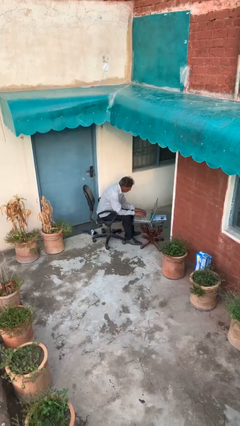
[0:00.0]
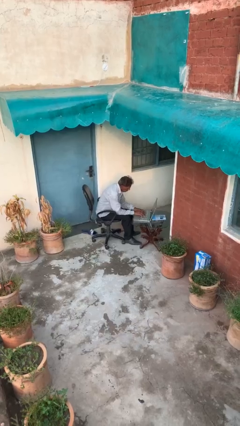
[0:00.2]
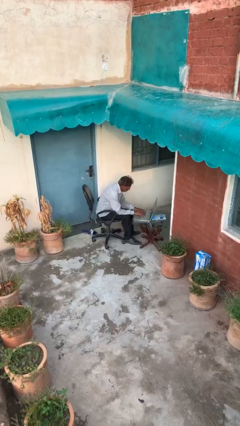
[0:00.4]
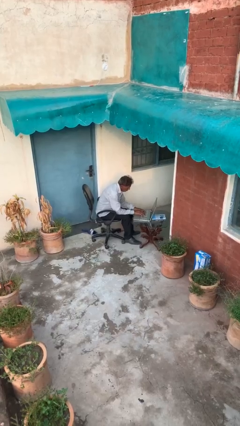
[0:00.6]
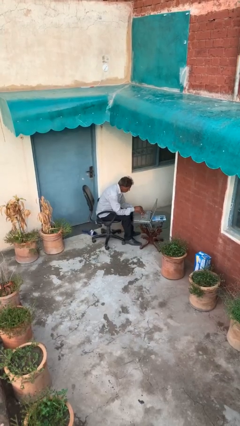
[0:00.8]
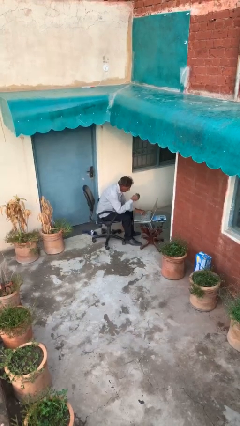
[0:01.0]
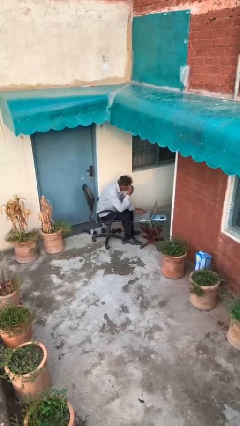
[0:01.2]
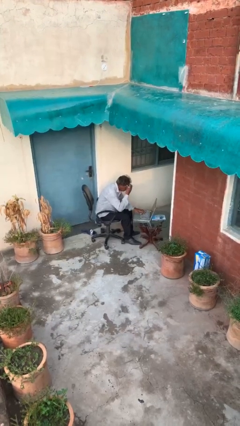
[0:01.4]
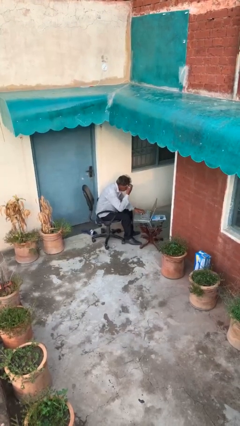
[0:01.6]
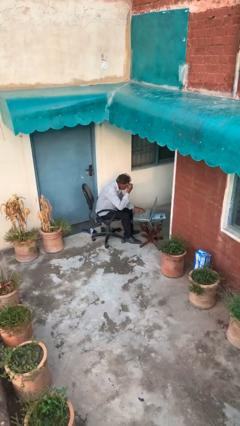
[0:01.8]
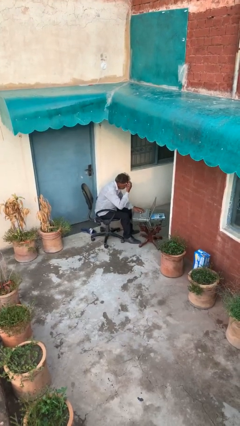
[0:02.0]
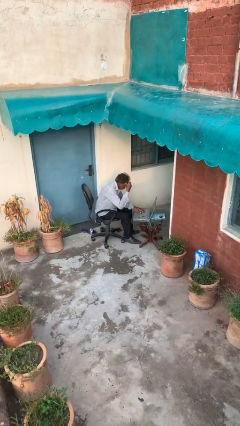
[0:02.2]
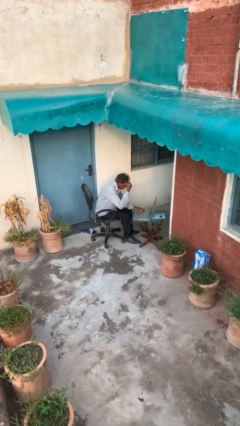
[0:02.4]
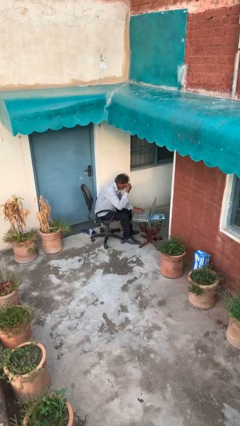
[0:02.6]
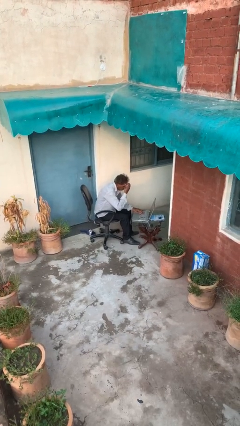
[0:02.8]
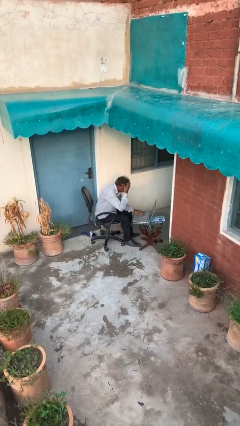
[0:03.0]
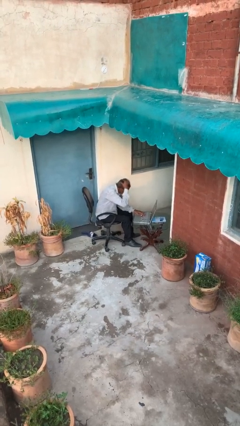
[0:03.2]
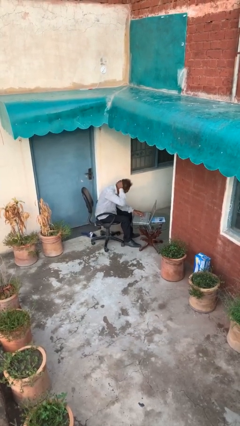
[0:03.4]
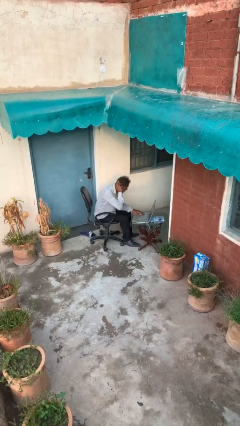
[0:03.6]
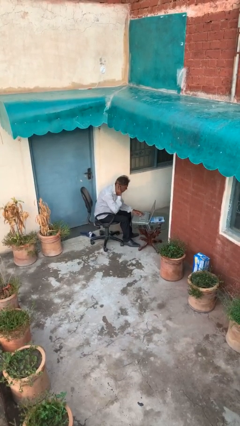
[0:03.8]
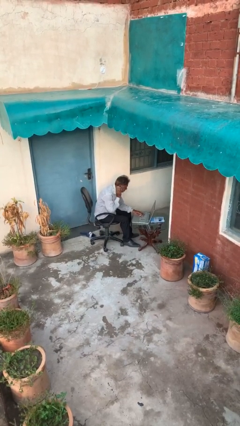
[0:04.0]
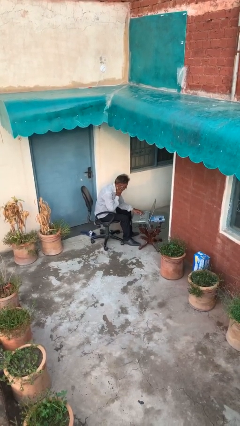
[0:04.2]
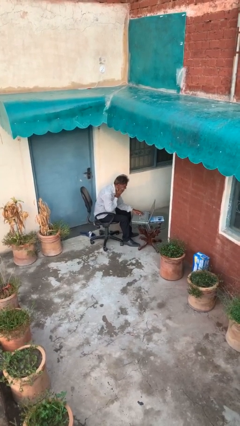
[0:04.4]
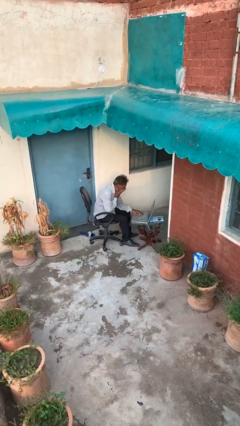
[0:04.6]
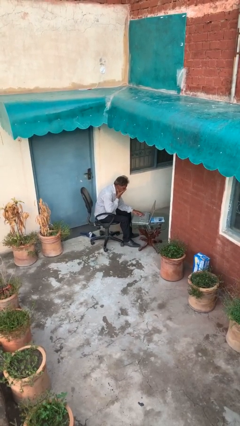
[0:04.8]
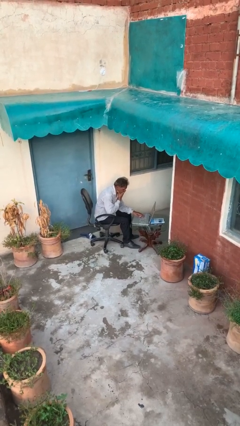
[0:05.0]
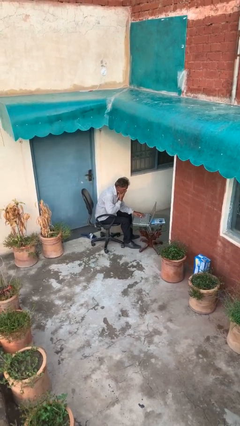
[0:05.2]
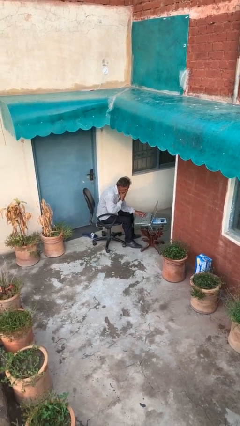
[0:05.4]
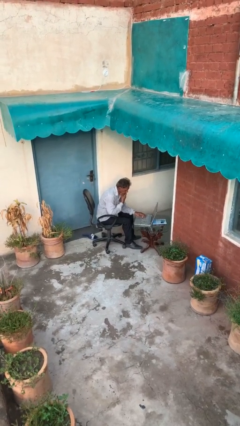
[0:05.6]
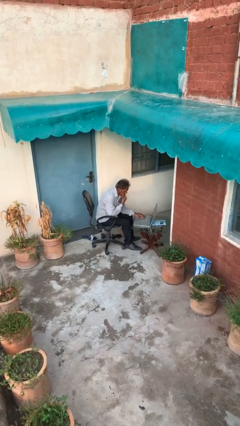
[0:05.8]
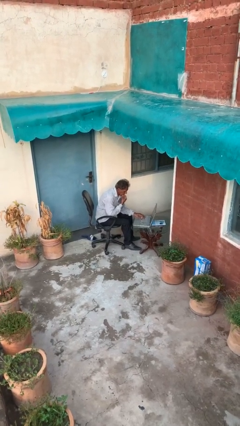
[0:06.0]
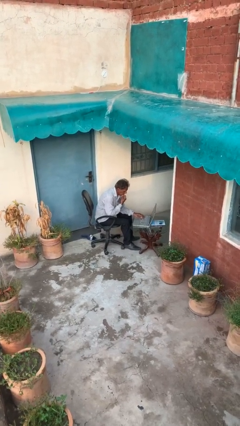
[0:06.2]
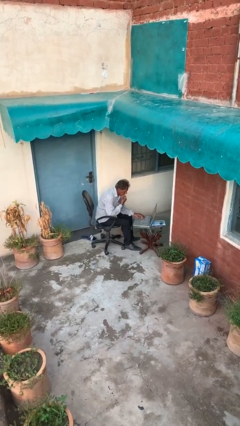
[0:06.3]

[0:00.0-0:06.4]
person interacts with laptop

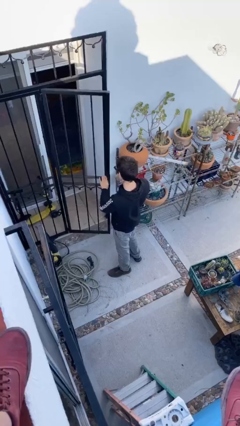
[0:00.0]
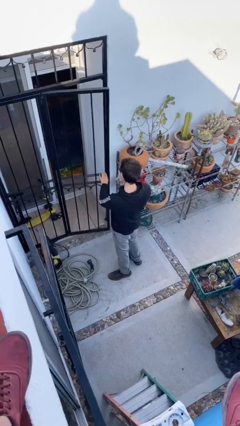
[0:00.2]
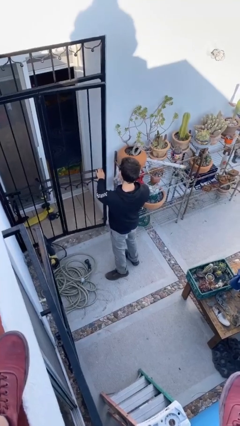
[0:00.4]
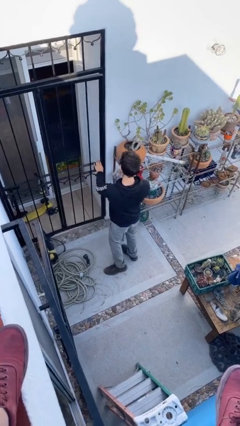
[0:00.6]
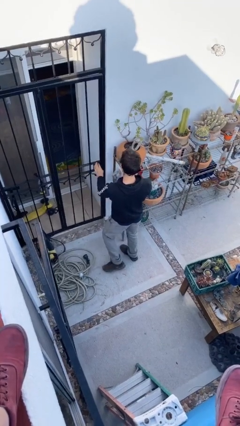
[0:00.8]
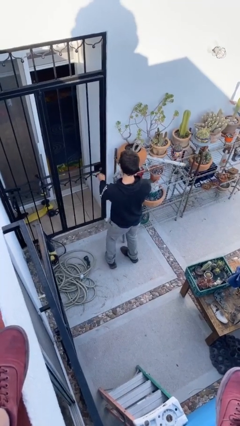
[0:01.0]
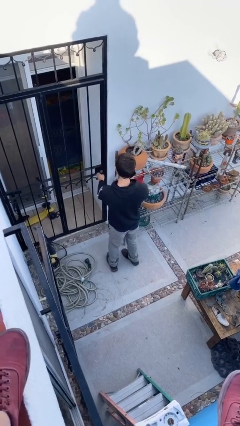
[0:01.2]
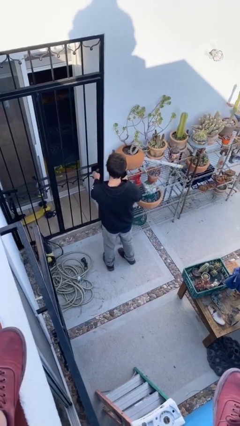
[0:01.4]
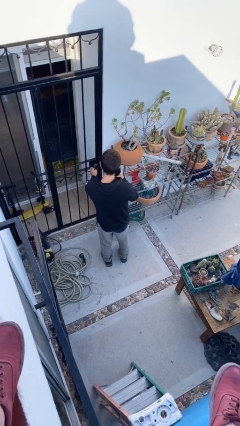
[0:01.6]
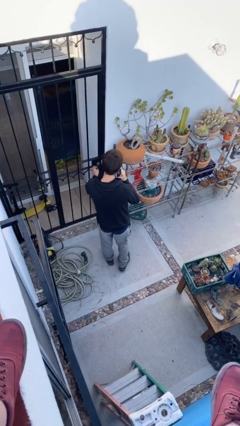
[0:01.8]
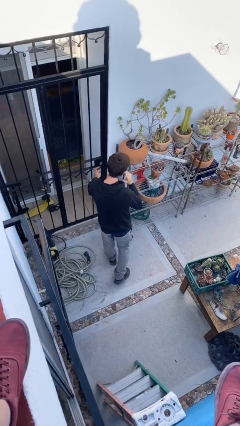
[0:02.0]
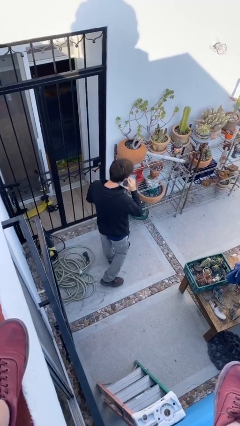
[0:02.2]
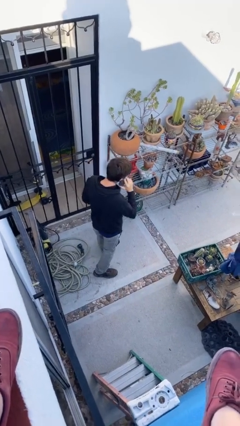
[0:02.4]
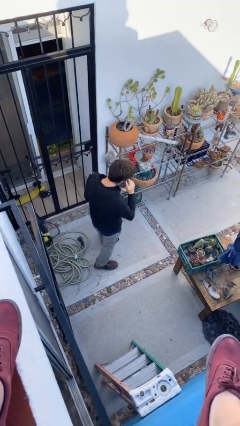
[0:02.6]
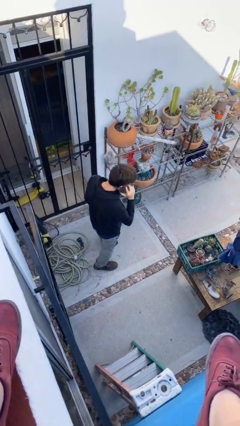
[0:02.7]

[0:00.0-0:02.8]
person closes facility door

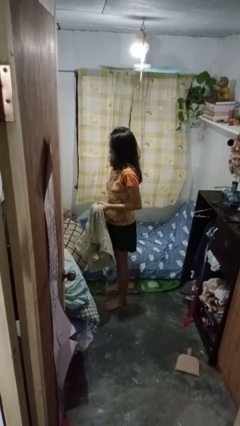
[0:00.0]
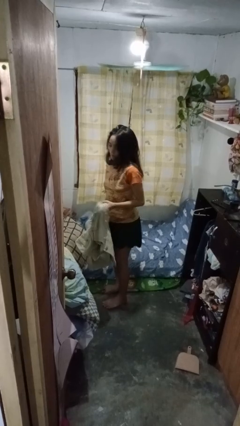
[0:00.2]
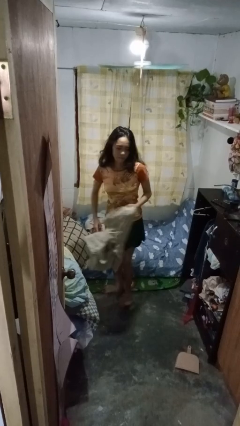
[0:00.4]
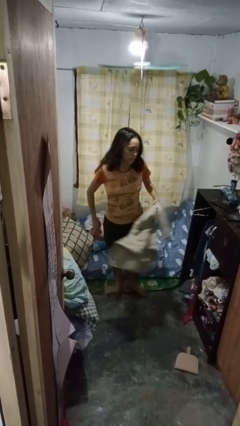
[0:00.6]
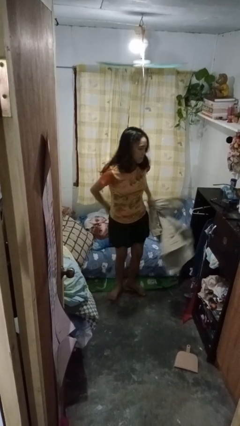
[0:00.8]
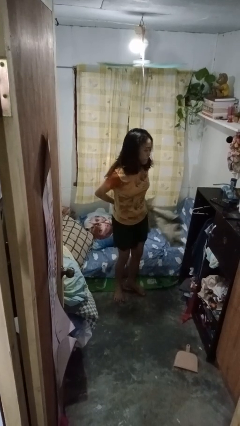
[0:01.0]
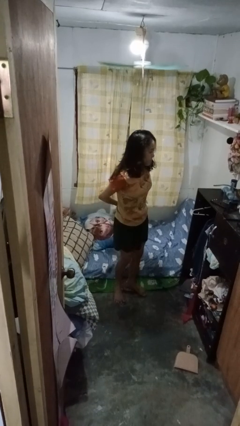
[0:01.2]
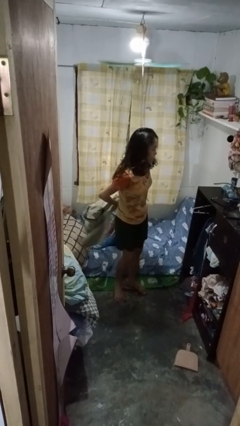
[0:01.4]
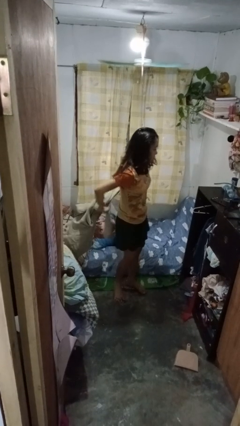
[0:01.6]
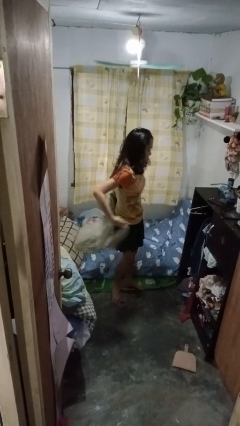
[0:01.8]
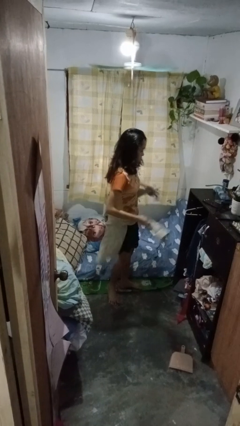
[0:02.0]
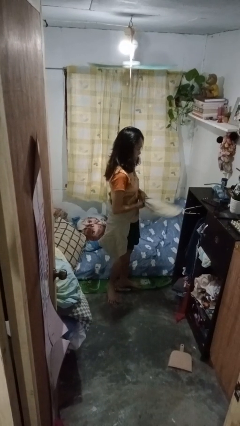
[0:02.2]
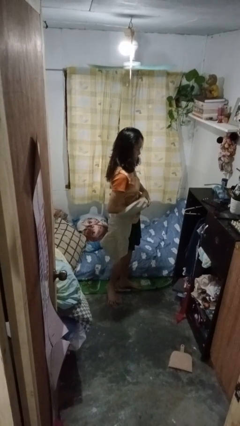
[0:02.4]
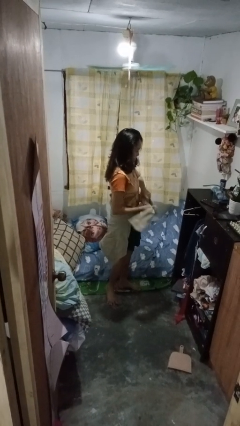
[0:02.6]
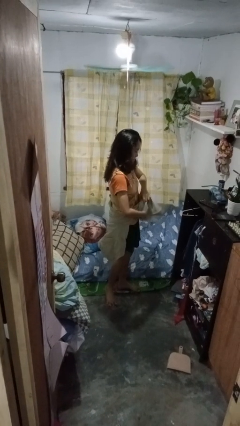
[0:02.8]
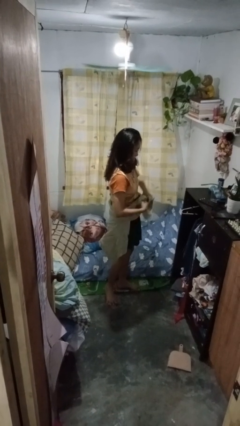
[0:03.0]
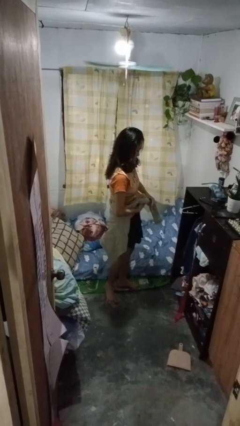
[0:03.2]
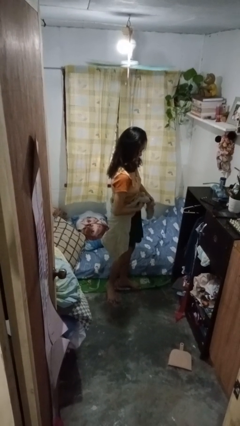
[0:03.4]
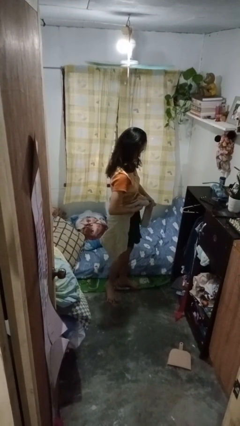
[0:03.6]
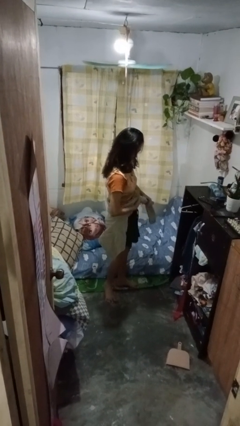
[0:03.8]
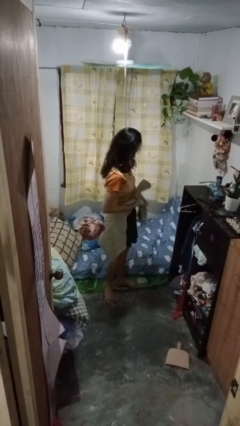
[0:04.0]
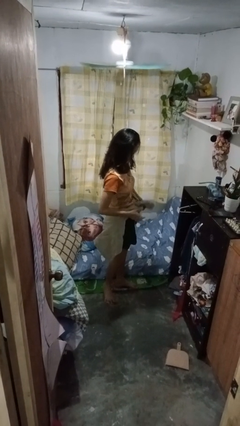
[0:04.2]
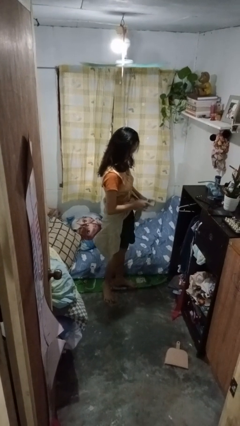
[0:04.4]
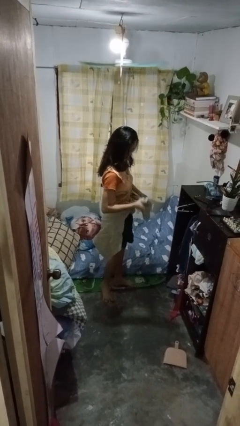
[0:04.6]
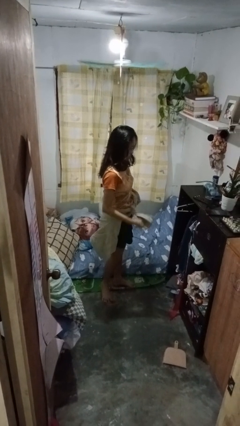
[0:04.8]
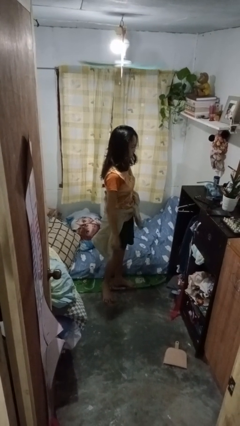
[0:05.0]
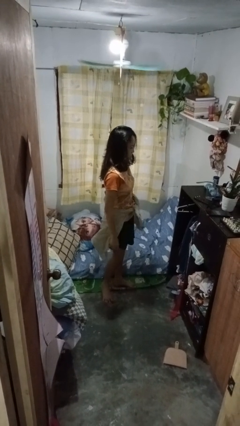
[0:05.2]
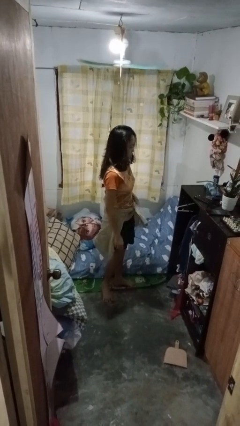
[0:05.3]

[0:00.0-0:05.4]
person ties jacket around waist

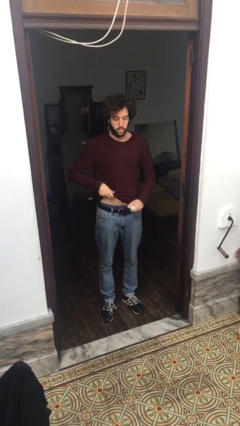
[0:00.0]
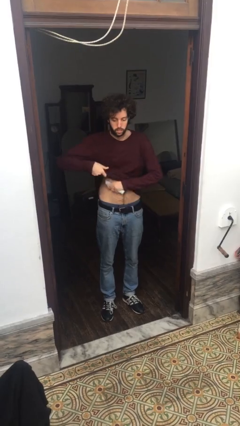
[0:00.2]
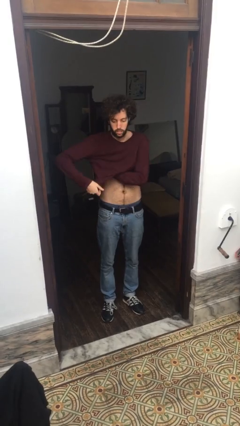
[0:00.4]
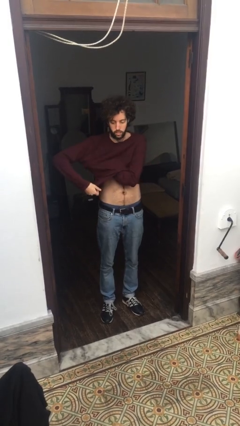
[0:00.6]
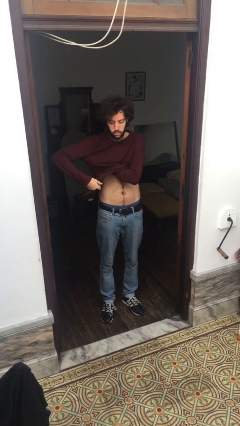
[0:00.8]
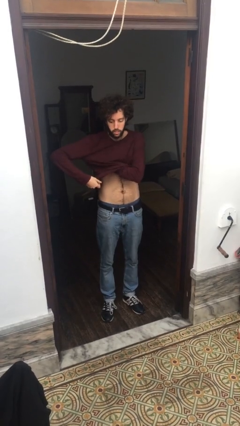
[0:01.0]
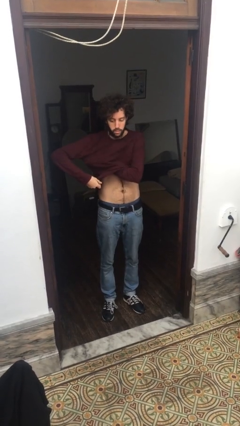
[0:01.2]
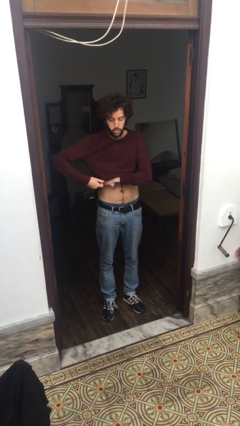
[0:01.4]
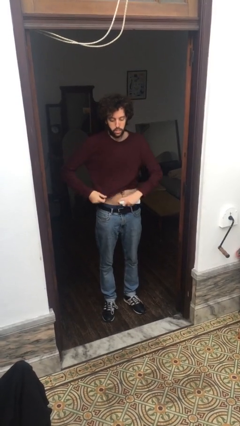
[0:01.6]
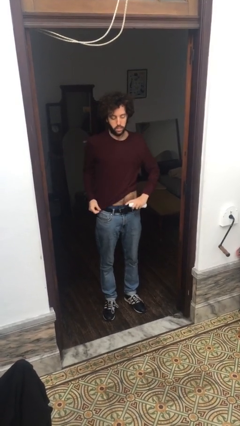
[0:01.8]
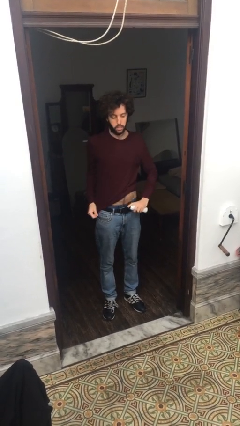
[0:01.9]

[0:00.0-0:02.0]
person applies deodorant

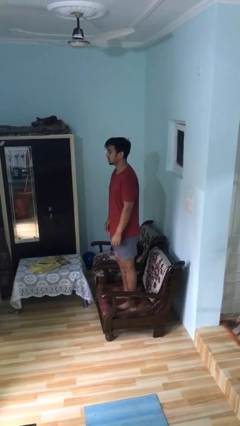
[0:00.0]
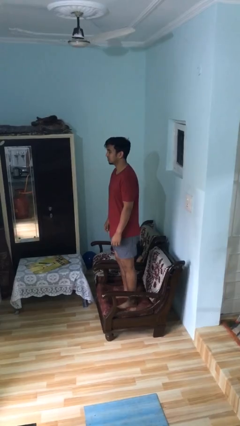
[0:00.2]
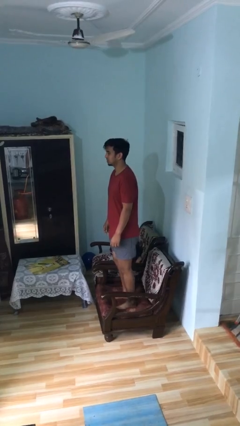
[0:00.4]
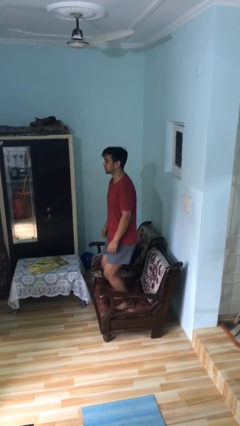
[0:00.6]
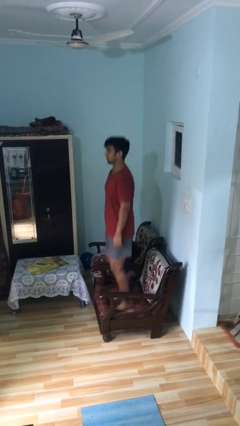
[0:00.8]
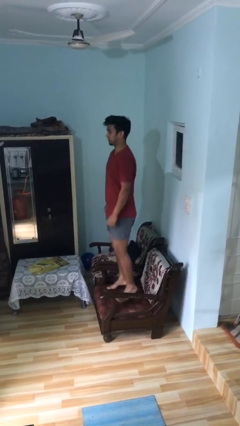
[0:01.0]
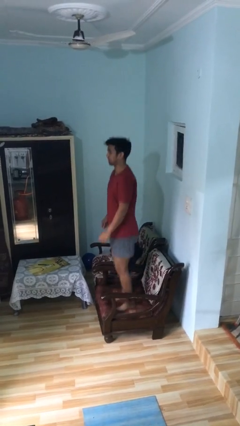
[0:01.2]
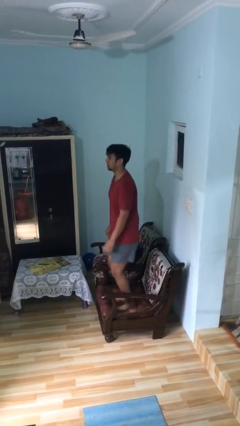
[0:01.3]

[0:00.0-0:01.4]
person jumps on couch
